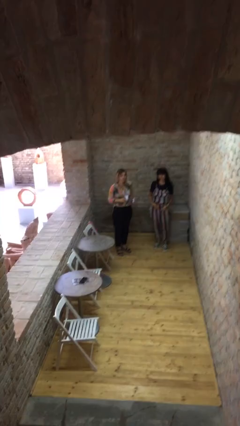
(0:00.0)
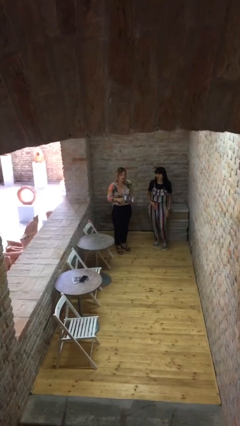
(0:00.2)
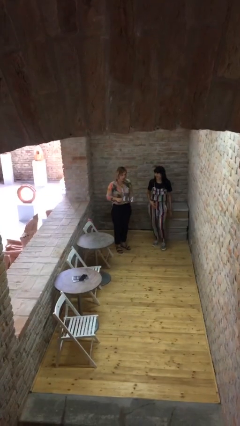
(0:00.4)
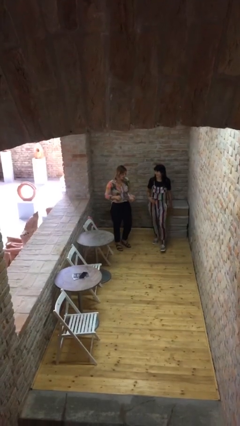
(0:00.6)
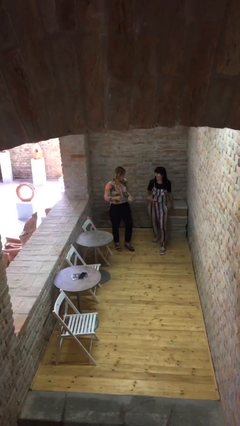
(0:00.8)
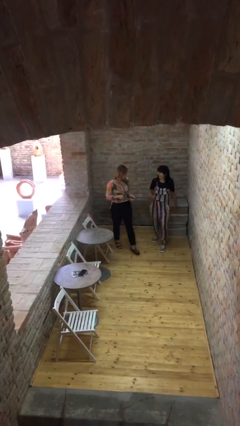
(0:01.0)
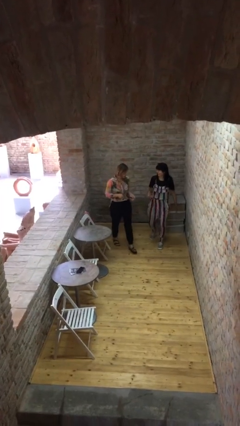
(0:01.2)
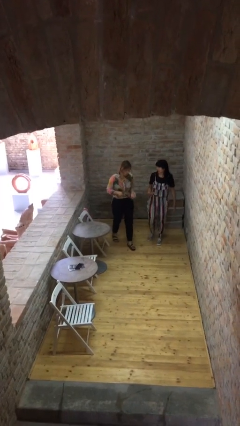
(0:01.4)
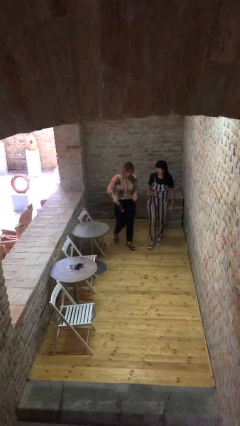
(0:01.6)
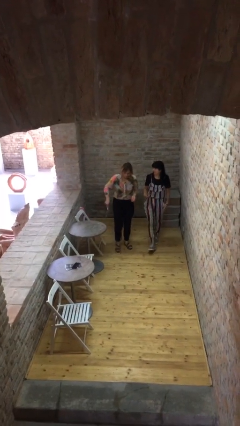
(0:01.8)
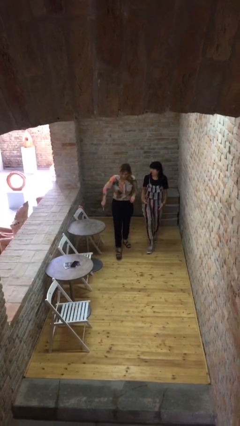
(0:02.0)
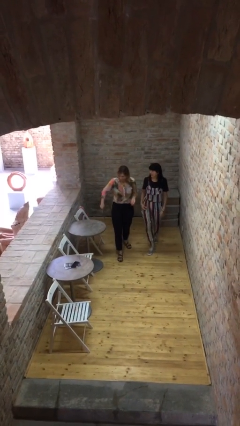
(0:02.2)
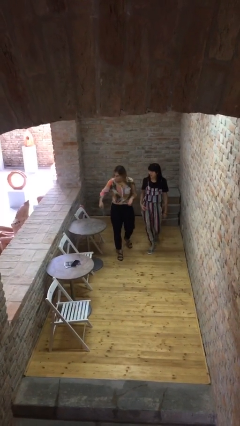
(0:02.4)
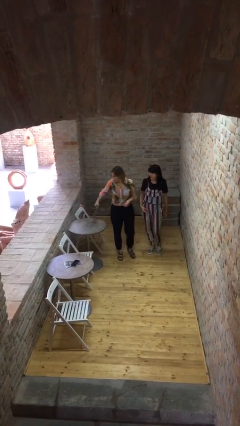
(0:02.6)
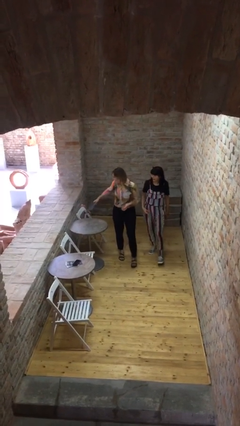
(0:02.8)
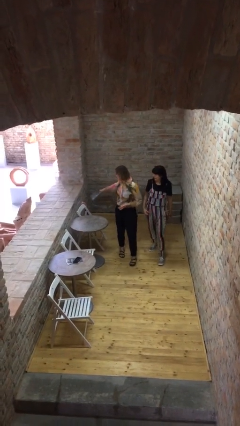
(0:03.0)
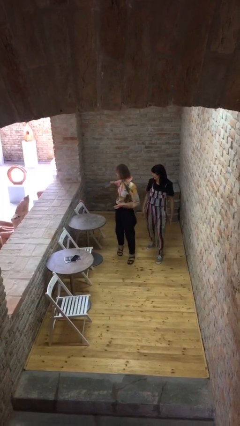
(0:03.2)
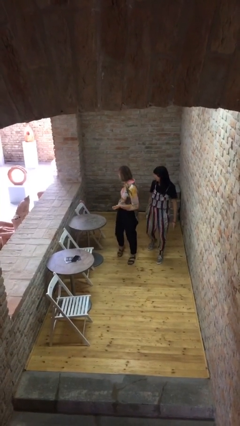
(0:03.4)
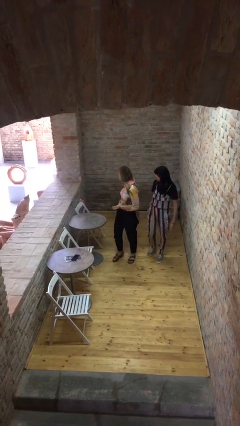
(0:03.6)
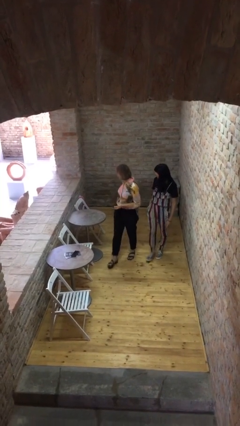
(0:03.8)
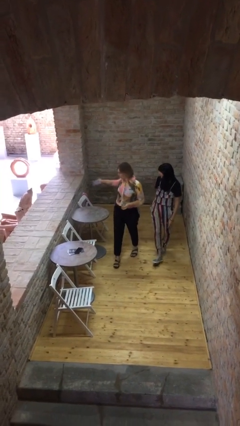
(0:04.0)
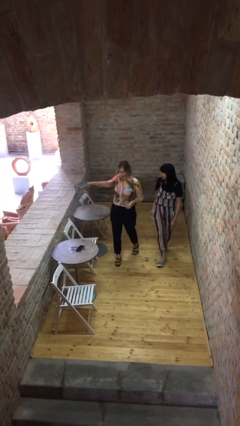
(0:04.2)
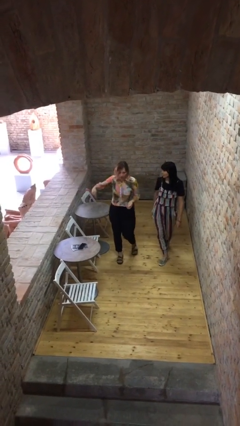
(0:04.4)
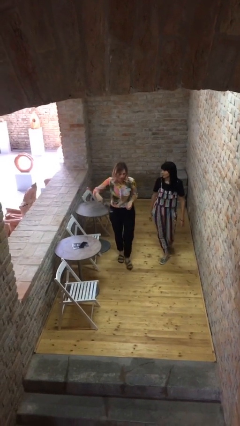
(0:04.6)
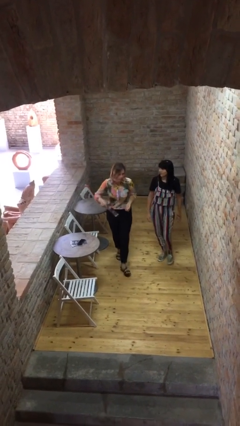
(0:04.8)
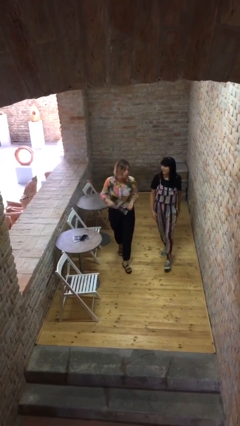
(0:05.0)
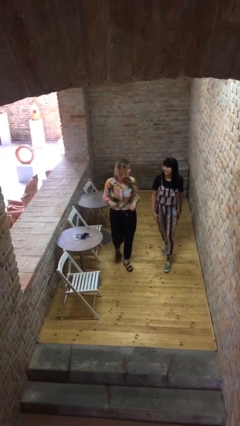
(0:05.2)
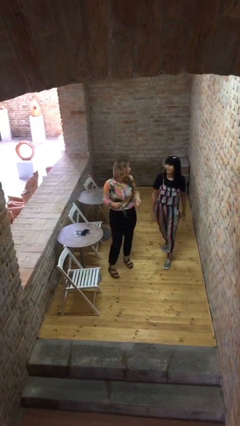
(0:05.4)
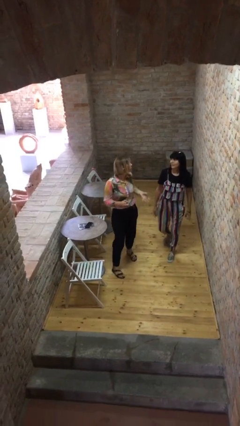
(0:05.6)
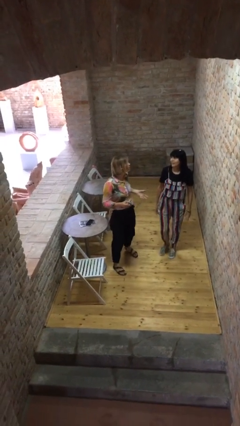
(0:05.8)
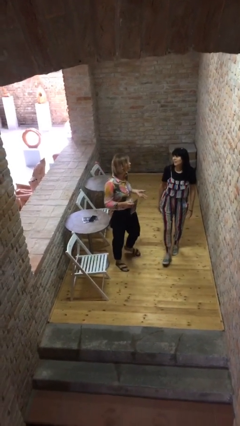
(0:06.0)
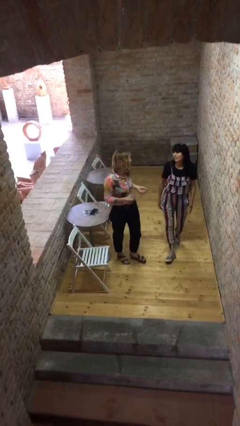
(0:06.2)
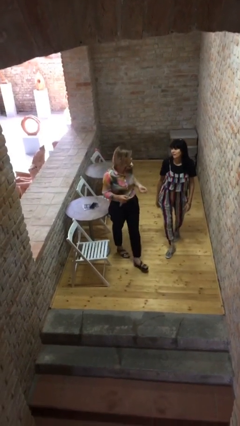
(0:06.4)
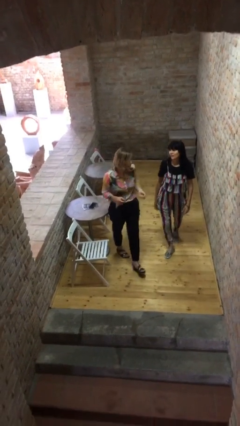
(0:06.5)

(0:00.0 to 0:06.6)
person talks to person

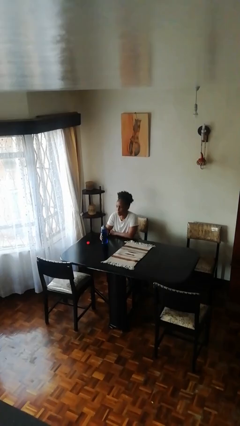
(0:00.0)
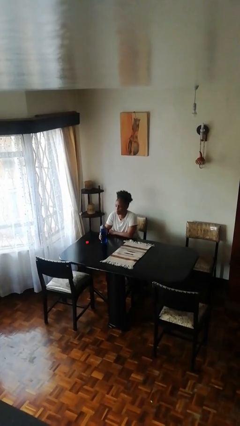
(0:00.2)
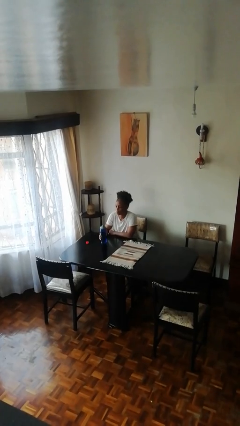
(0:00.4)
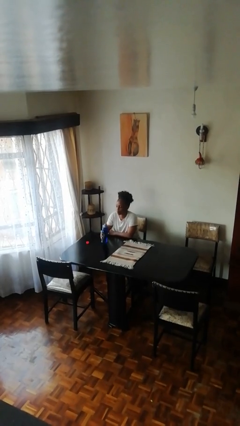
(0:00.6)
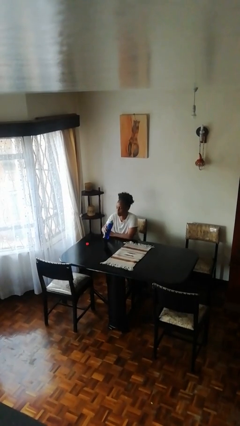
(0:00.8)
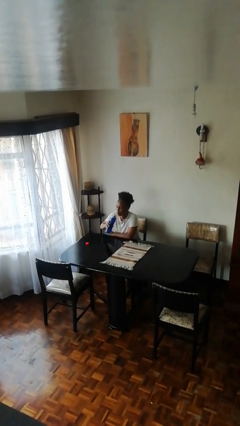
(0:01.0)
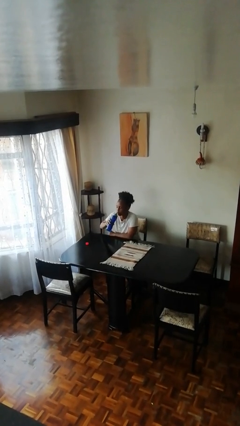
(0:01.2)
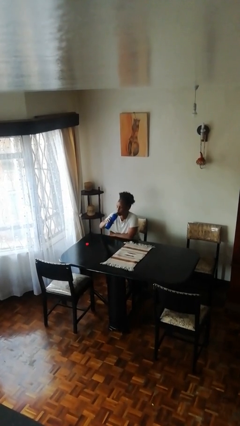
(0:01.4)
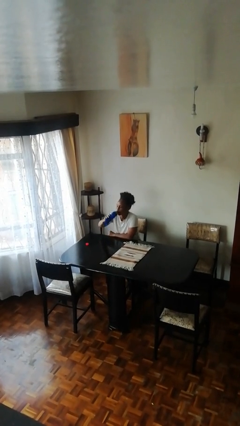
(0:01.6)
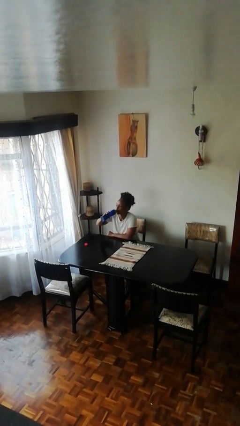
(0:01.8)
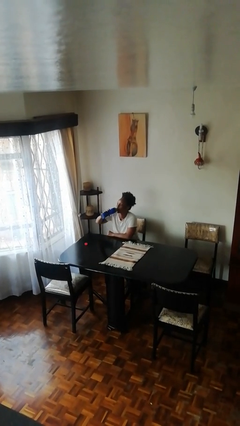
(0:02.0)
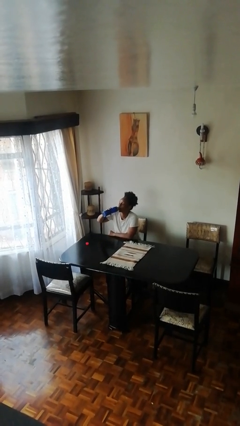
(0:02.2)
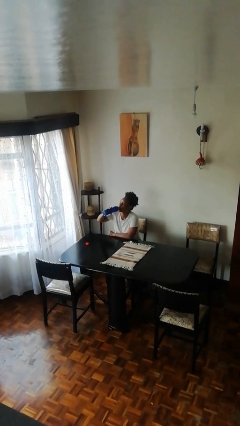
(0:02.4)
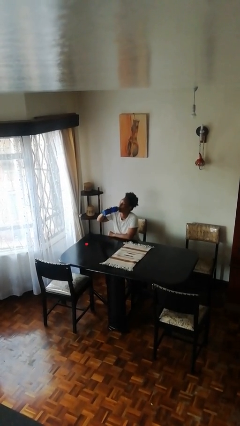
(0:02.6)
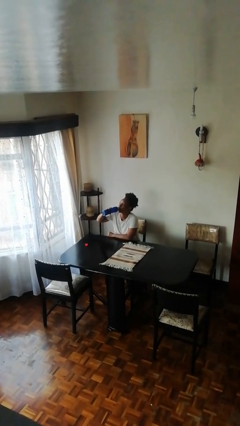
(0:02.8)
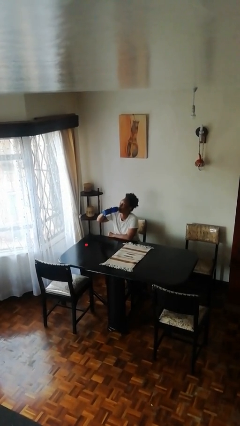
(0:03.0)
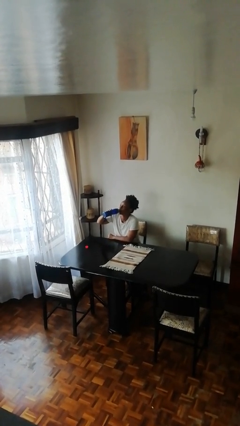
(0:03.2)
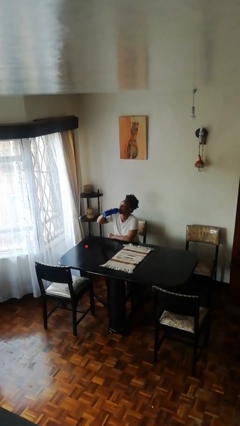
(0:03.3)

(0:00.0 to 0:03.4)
person drinks from bottle

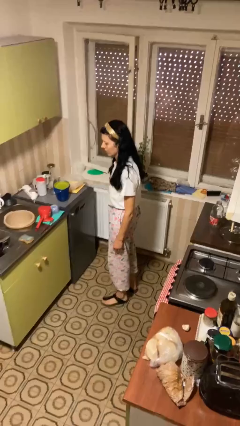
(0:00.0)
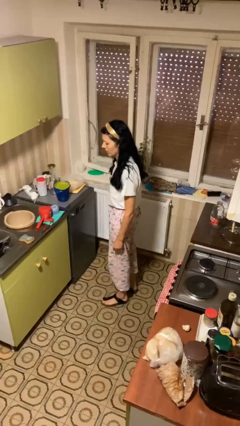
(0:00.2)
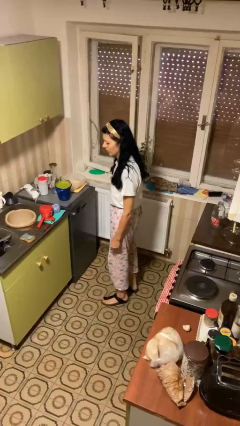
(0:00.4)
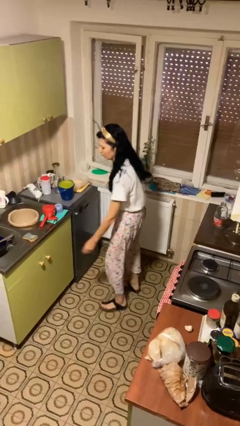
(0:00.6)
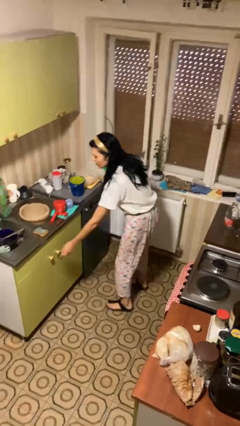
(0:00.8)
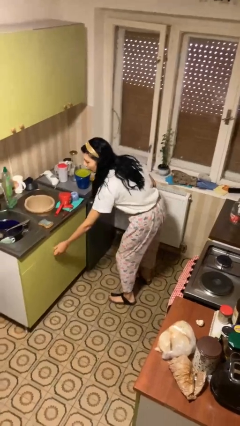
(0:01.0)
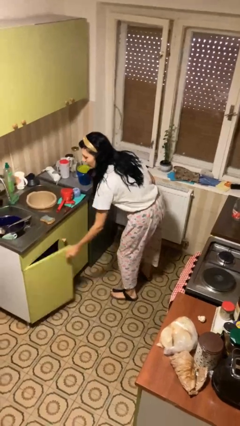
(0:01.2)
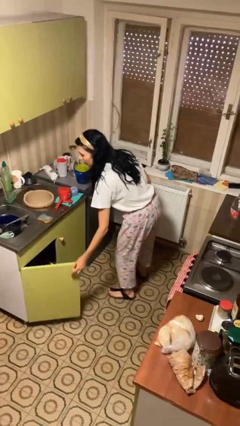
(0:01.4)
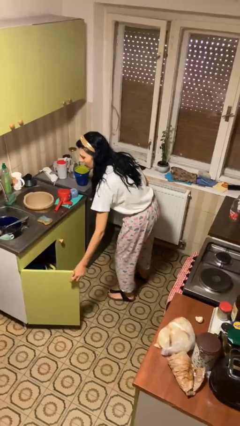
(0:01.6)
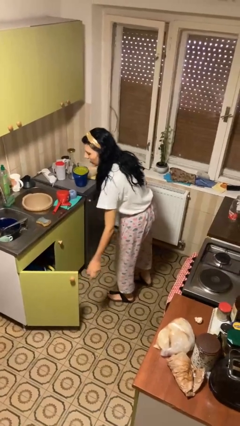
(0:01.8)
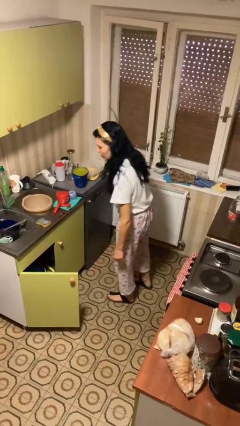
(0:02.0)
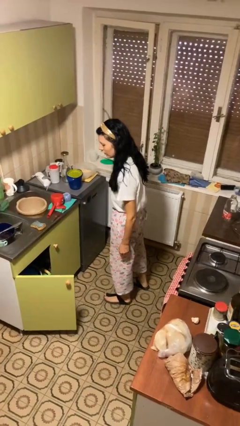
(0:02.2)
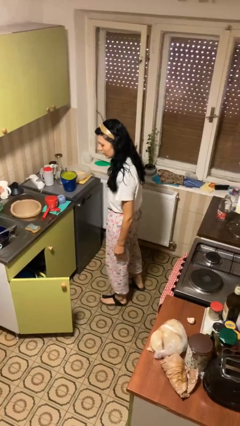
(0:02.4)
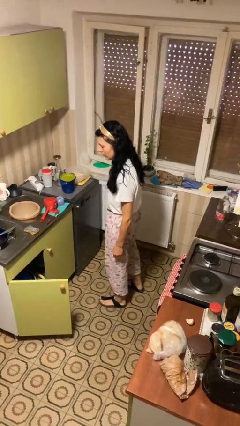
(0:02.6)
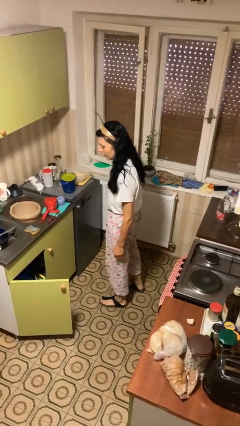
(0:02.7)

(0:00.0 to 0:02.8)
person opens cabinet

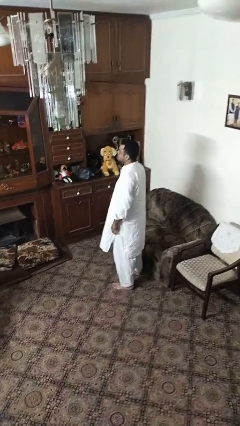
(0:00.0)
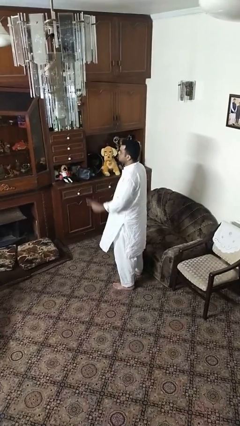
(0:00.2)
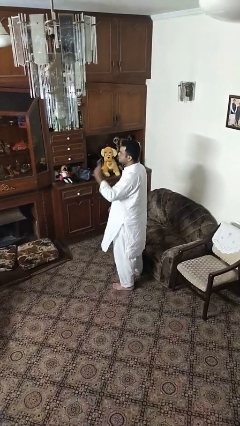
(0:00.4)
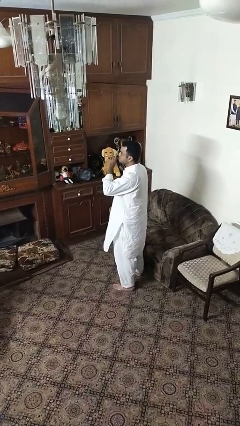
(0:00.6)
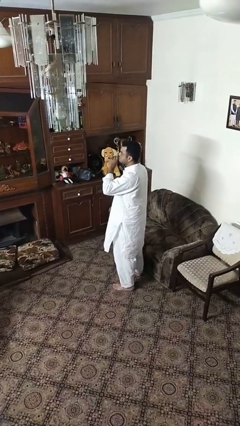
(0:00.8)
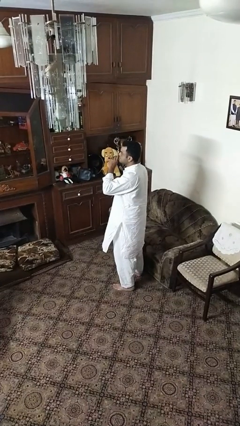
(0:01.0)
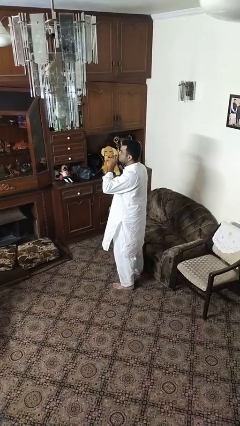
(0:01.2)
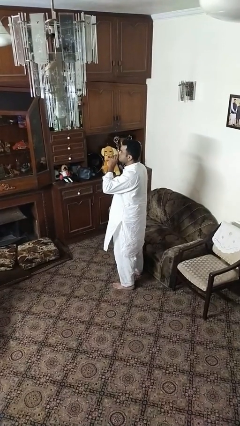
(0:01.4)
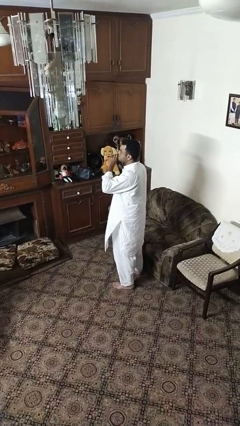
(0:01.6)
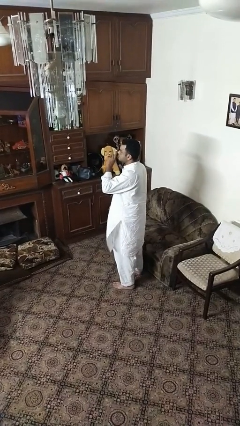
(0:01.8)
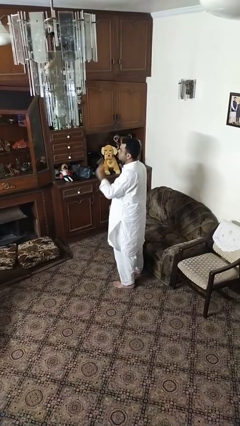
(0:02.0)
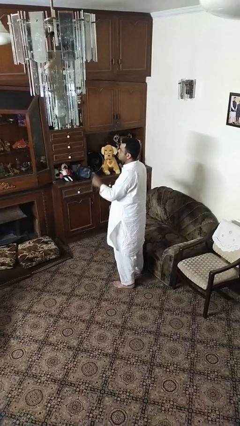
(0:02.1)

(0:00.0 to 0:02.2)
person gestures be quiet

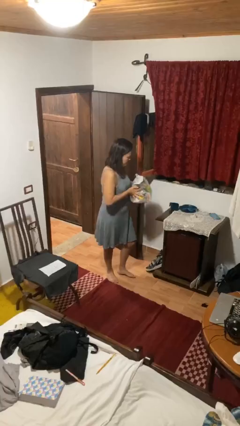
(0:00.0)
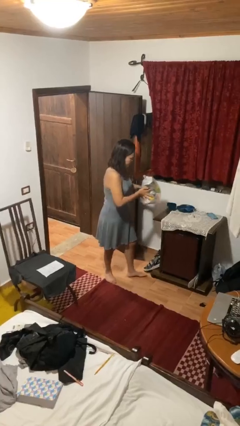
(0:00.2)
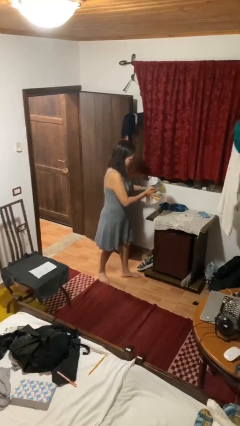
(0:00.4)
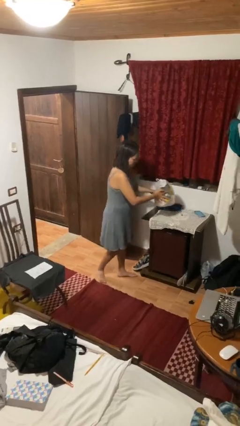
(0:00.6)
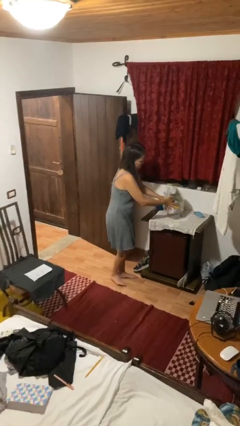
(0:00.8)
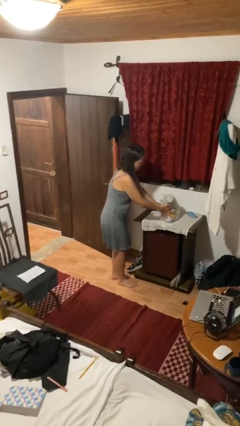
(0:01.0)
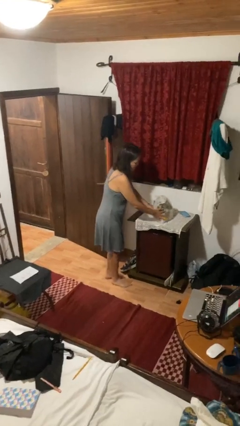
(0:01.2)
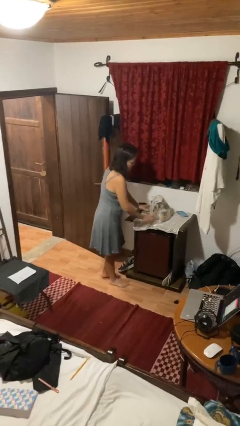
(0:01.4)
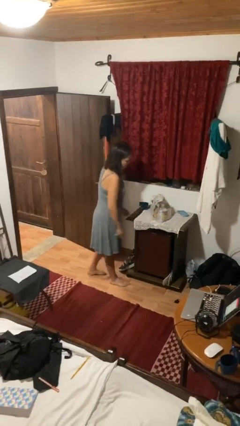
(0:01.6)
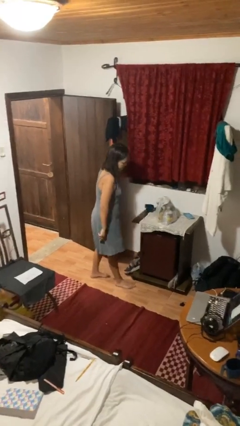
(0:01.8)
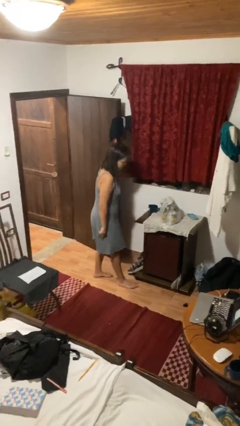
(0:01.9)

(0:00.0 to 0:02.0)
person puts down object on countertop

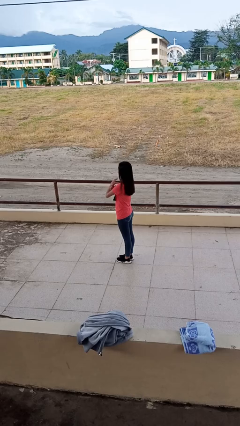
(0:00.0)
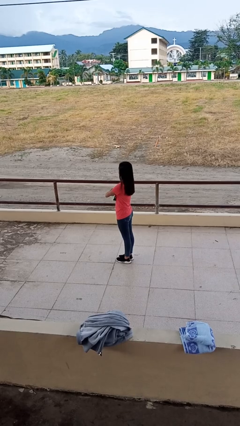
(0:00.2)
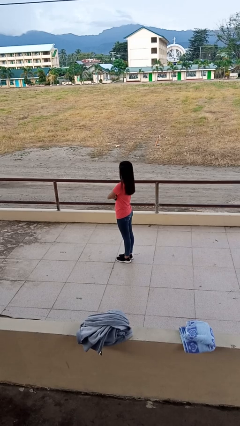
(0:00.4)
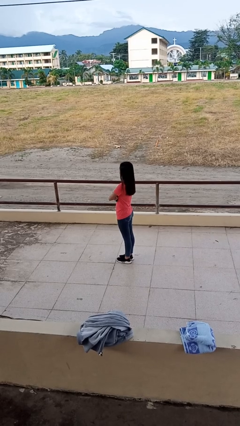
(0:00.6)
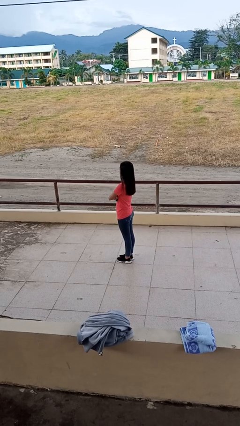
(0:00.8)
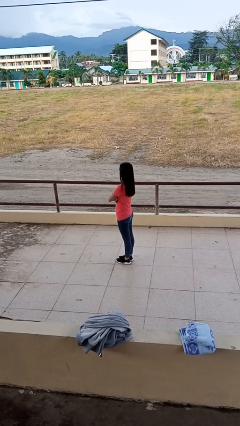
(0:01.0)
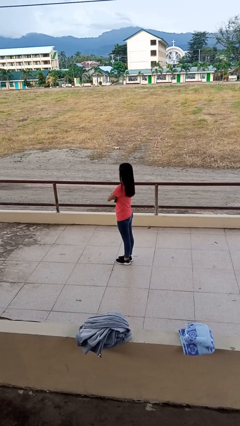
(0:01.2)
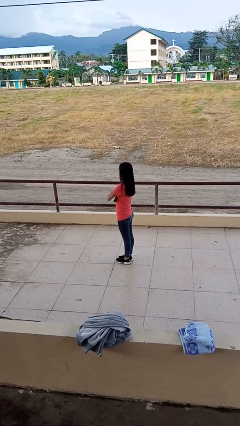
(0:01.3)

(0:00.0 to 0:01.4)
person crosses arms
